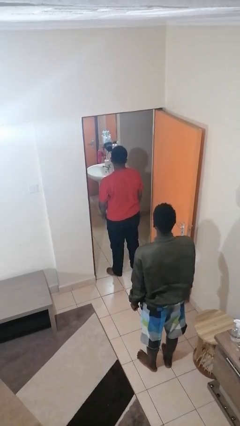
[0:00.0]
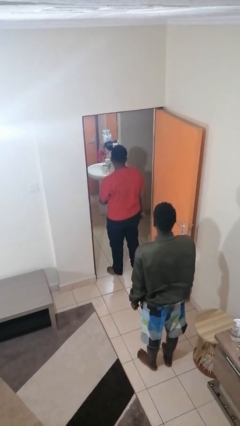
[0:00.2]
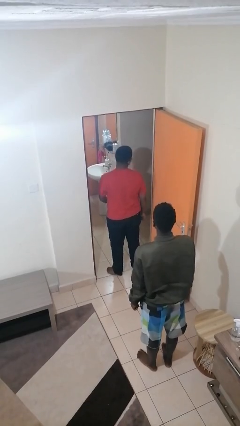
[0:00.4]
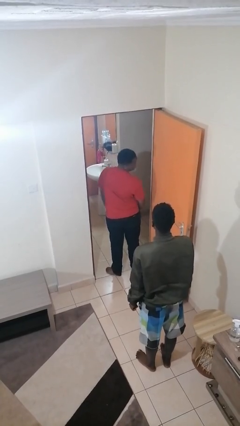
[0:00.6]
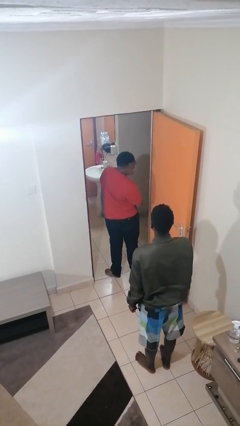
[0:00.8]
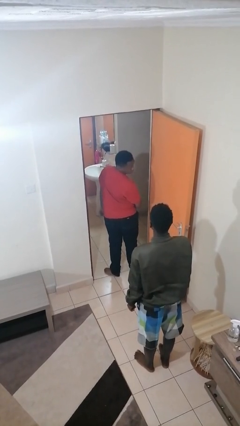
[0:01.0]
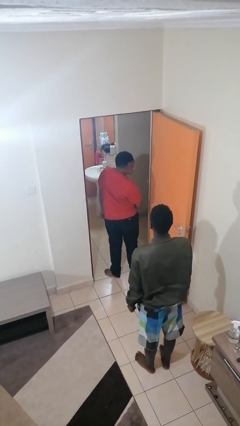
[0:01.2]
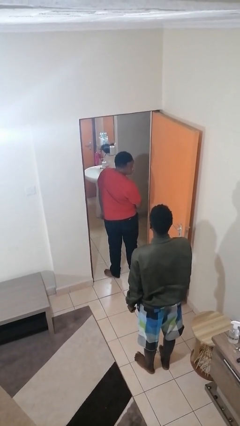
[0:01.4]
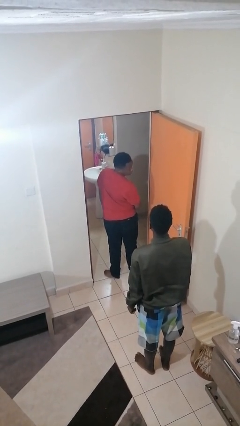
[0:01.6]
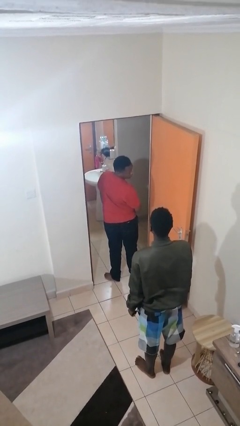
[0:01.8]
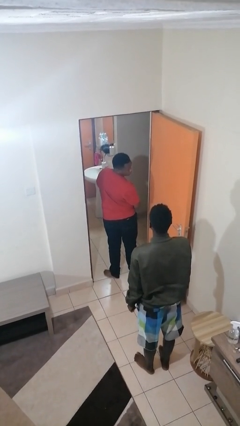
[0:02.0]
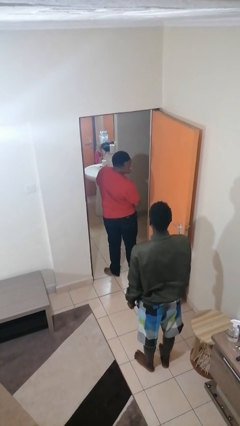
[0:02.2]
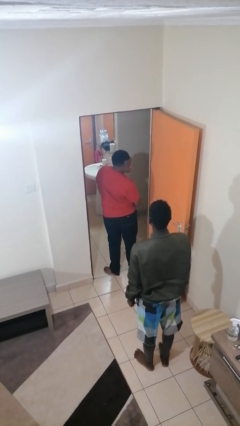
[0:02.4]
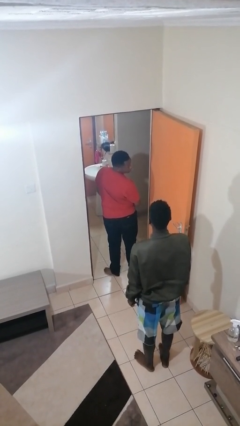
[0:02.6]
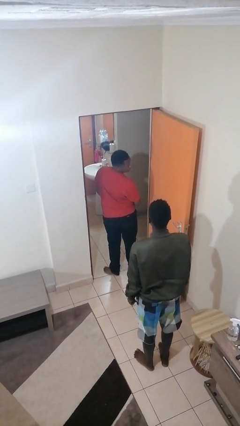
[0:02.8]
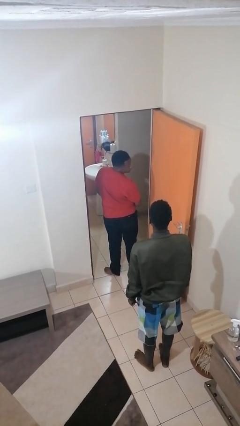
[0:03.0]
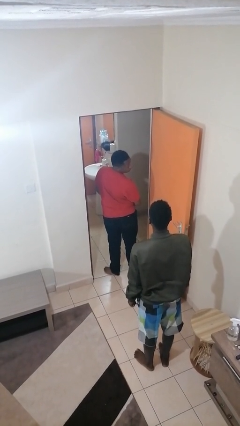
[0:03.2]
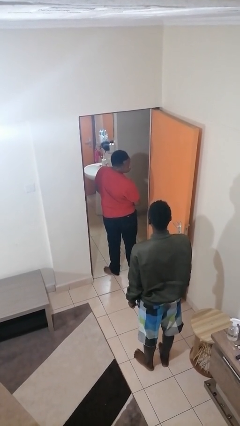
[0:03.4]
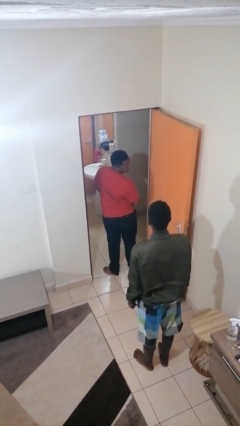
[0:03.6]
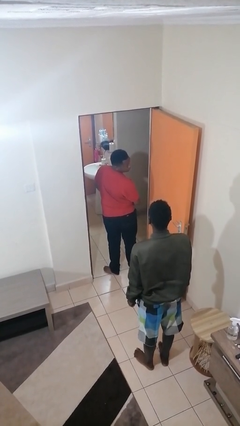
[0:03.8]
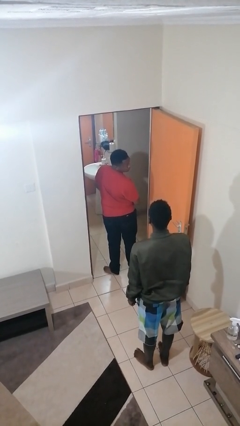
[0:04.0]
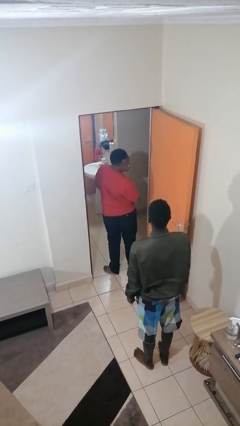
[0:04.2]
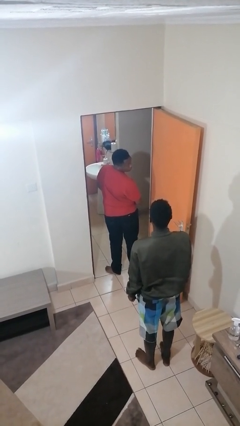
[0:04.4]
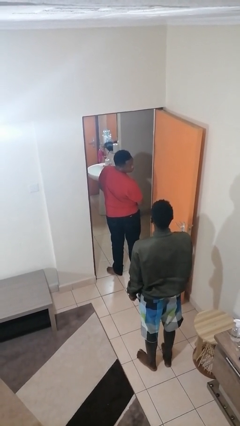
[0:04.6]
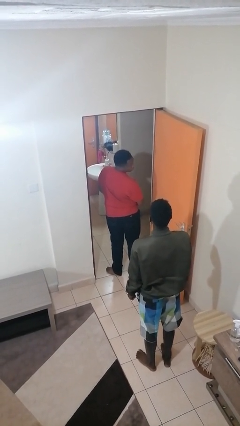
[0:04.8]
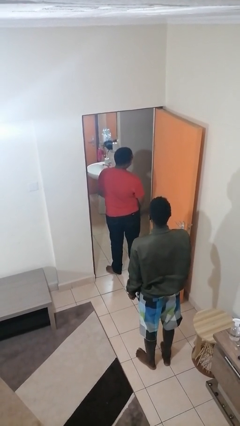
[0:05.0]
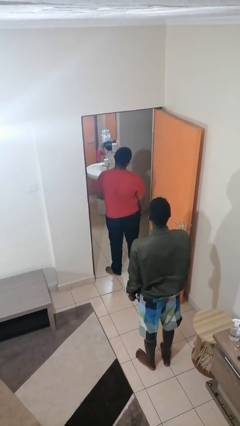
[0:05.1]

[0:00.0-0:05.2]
person looks over shoulder

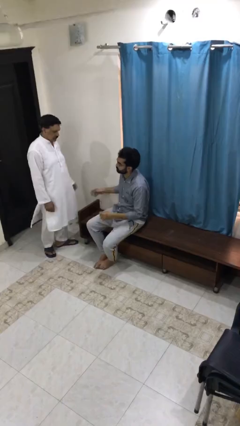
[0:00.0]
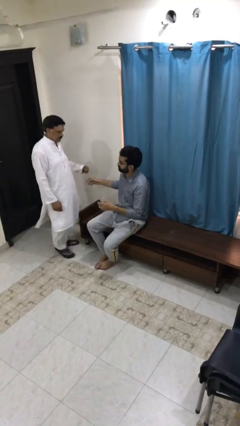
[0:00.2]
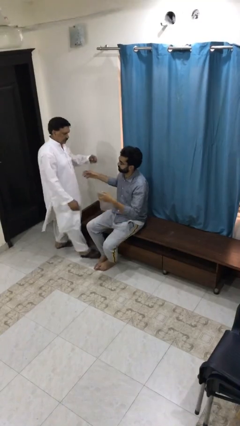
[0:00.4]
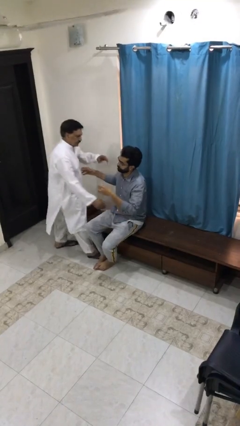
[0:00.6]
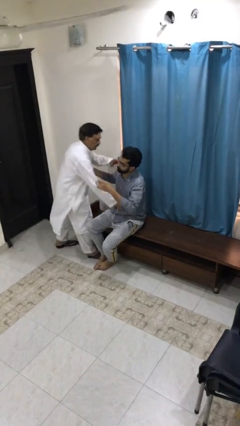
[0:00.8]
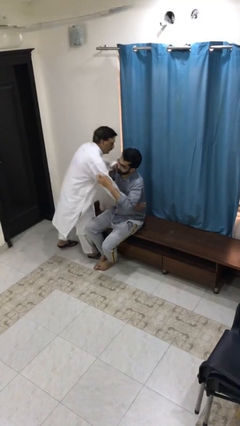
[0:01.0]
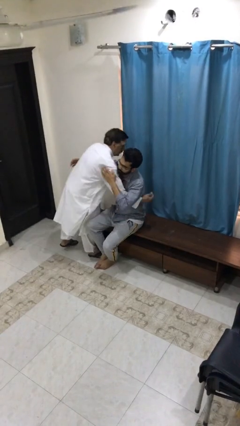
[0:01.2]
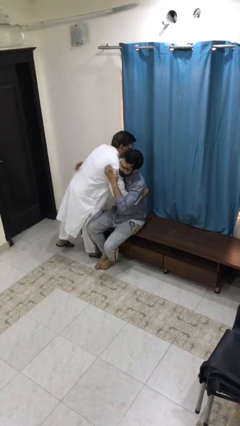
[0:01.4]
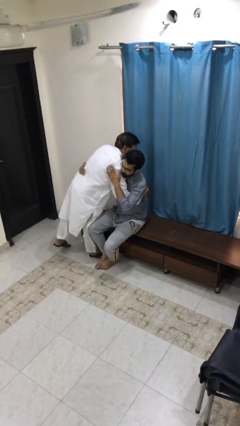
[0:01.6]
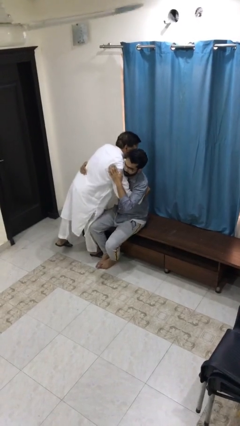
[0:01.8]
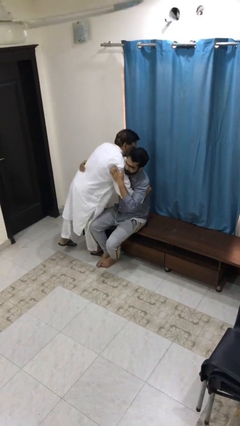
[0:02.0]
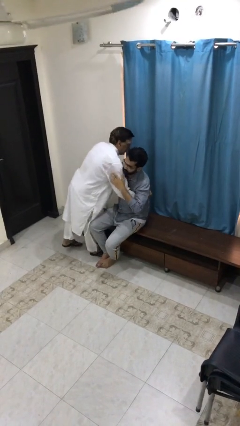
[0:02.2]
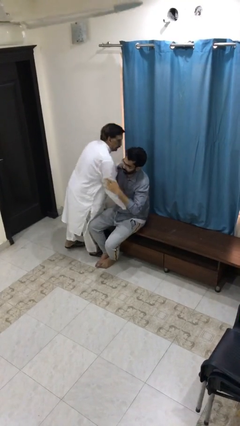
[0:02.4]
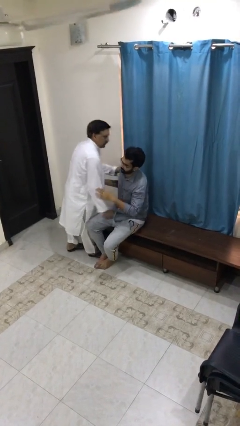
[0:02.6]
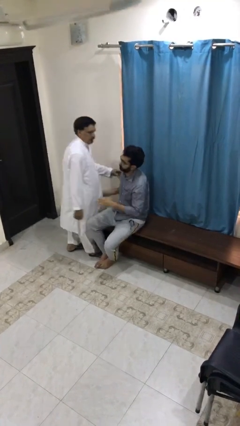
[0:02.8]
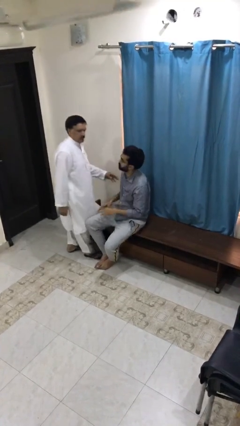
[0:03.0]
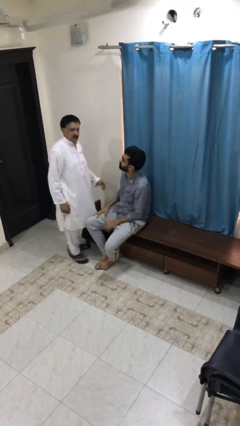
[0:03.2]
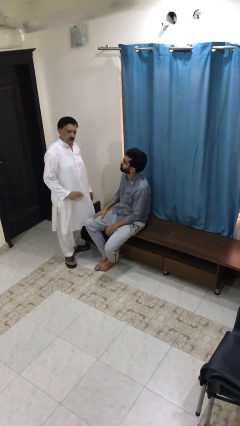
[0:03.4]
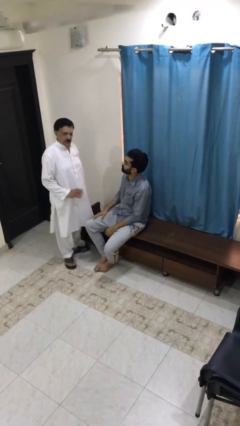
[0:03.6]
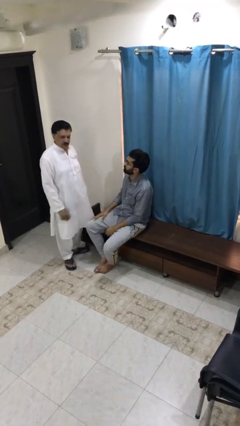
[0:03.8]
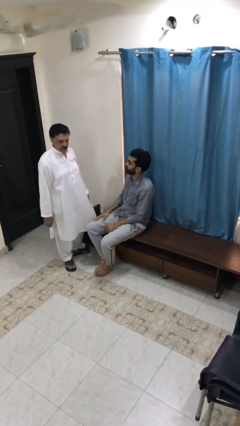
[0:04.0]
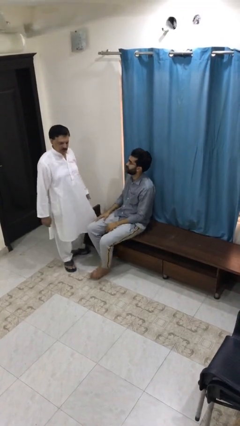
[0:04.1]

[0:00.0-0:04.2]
person embraces person

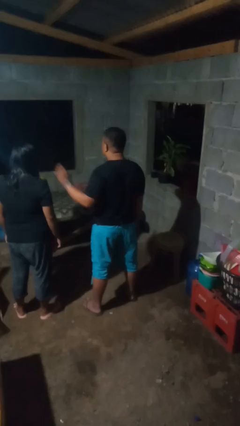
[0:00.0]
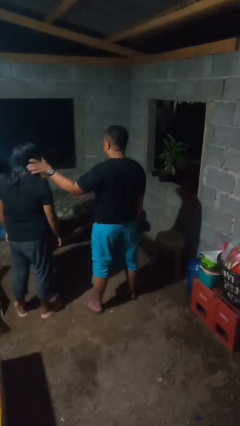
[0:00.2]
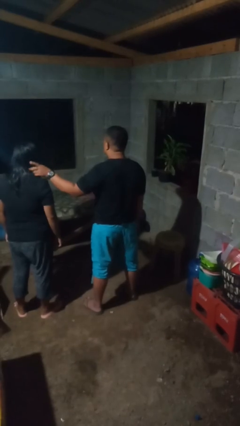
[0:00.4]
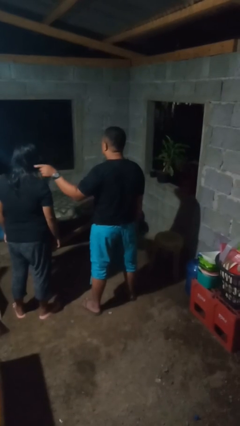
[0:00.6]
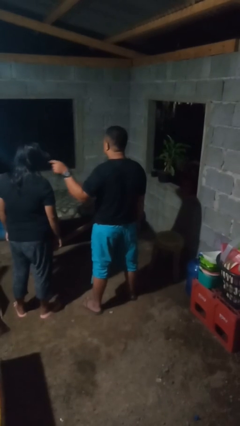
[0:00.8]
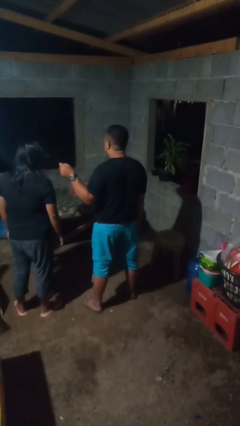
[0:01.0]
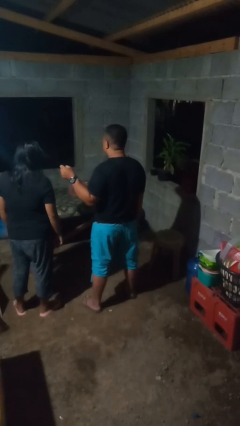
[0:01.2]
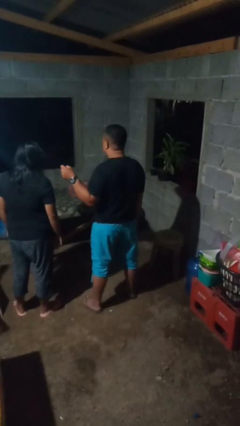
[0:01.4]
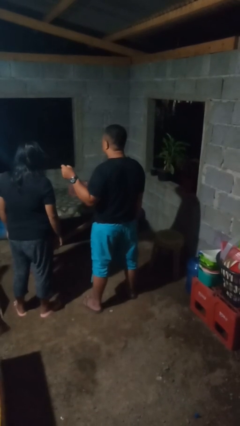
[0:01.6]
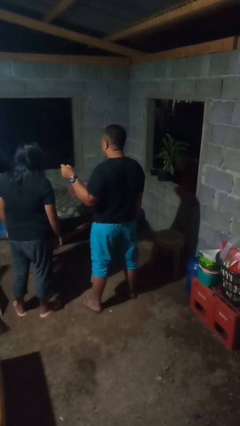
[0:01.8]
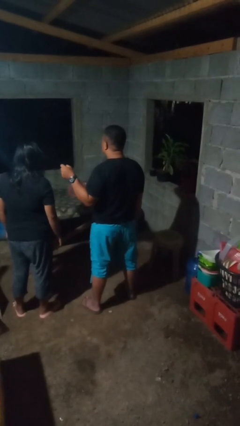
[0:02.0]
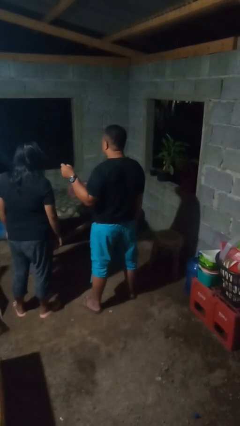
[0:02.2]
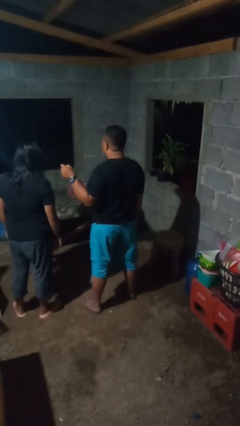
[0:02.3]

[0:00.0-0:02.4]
person grabs person by hair

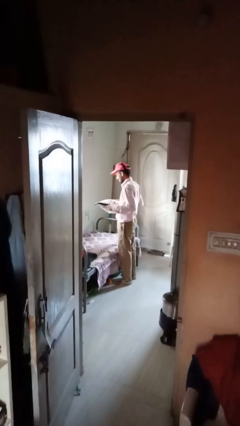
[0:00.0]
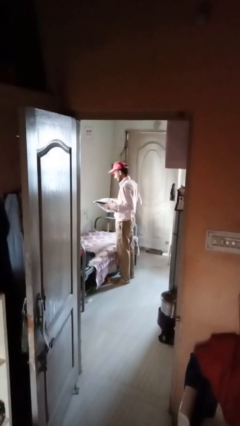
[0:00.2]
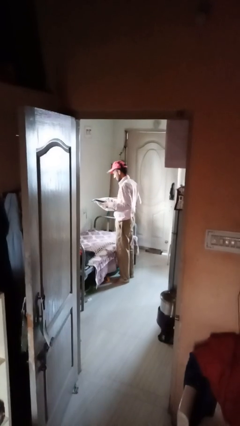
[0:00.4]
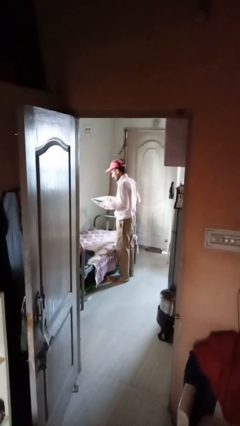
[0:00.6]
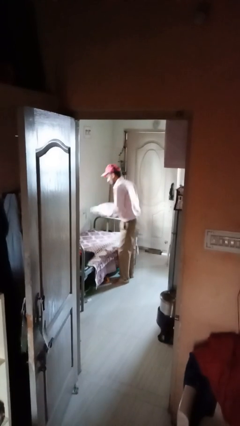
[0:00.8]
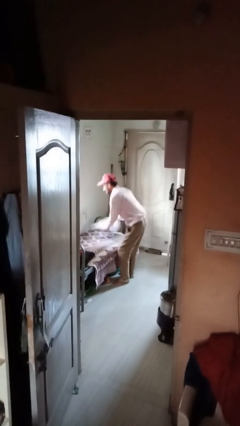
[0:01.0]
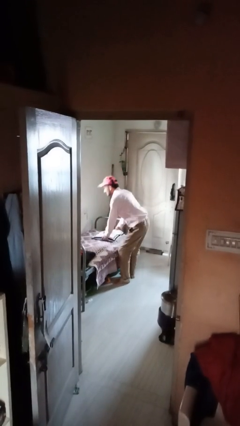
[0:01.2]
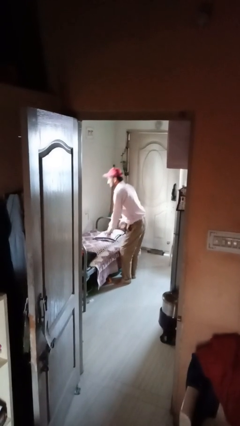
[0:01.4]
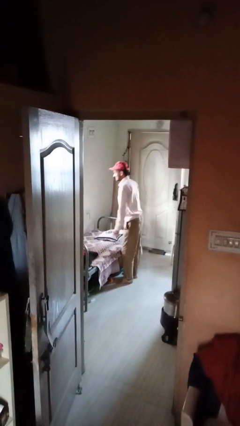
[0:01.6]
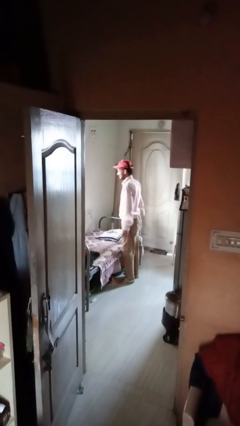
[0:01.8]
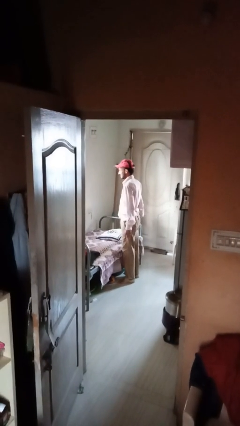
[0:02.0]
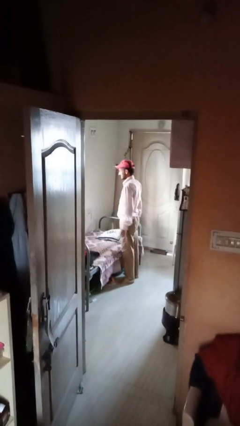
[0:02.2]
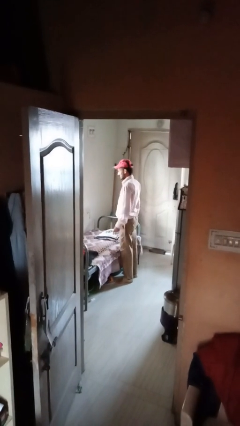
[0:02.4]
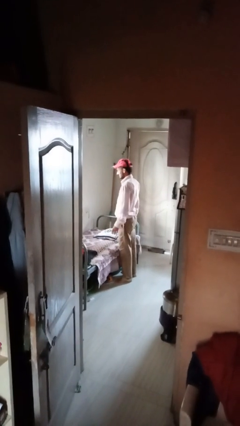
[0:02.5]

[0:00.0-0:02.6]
person puts down object on bed

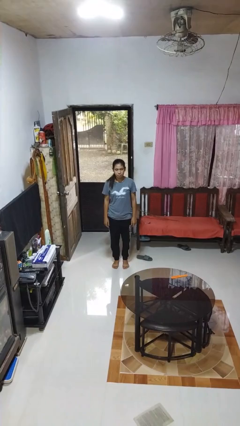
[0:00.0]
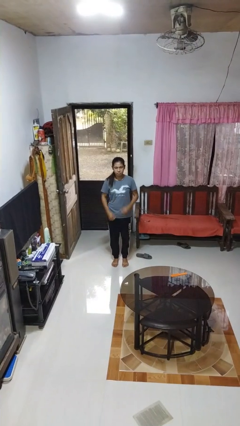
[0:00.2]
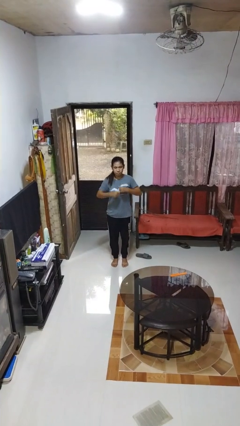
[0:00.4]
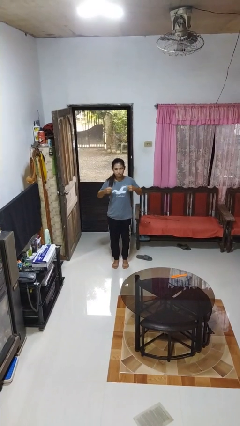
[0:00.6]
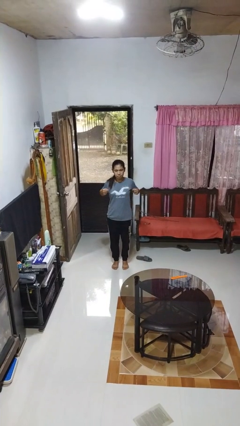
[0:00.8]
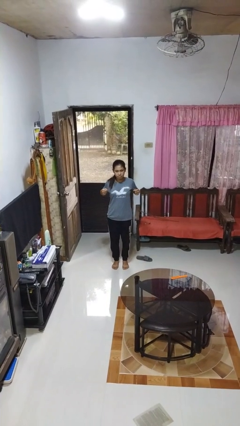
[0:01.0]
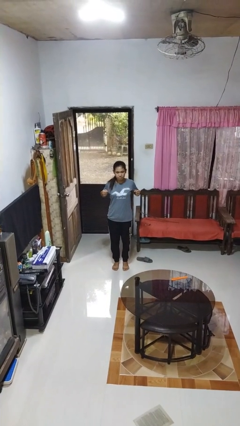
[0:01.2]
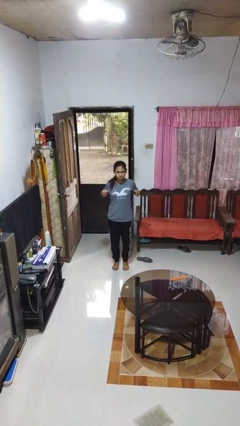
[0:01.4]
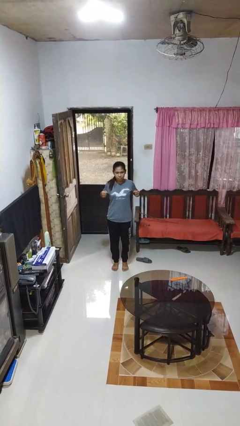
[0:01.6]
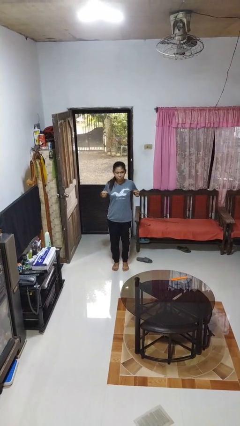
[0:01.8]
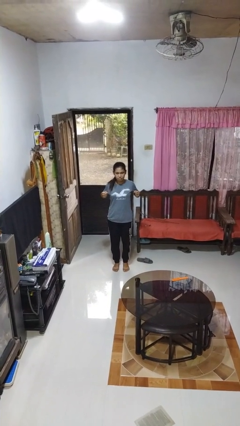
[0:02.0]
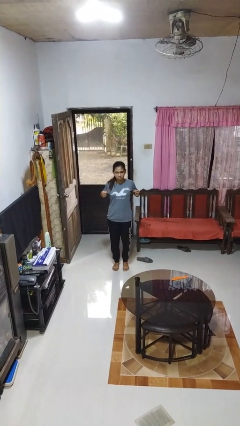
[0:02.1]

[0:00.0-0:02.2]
person gestures zoom in

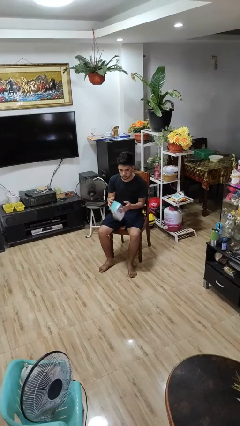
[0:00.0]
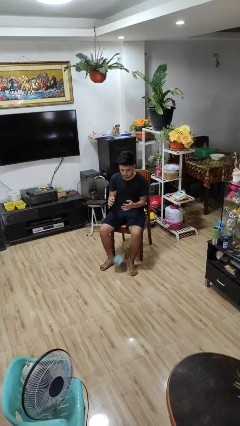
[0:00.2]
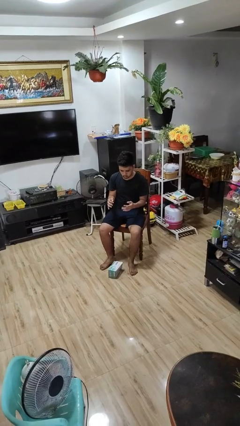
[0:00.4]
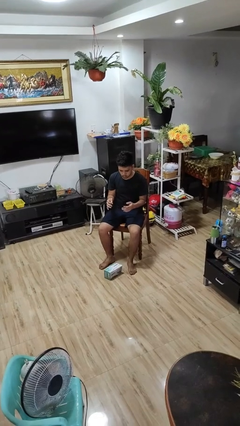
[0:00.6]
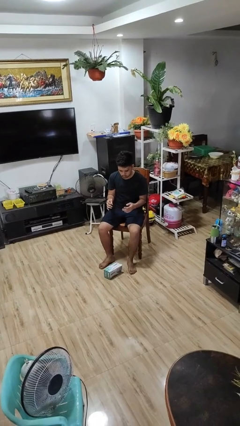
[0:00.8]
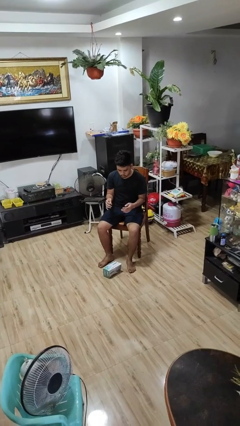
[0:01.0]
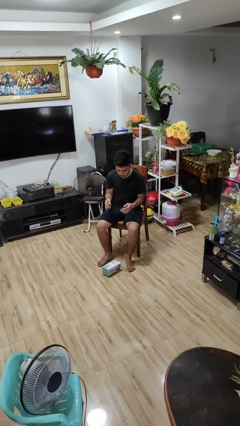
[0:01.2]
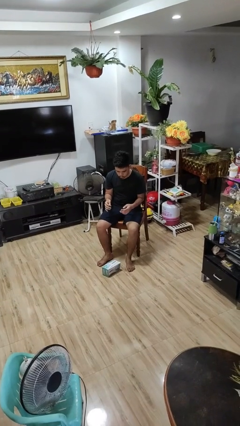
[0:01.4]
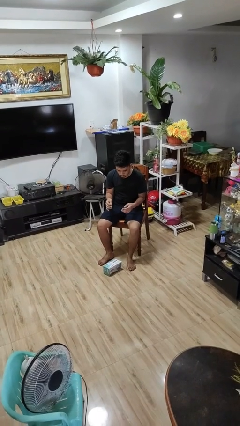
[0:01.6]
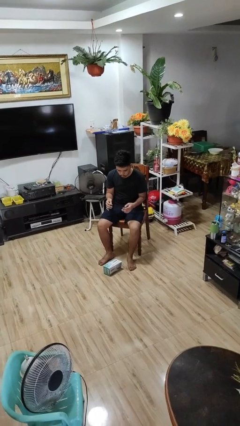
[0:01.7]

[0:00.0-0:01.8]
person drops object
